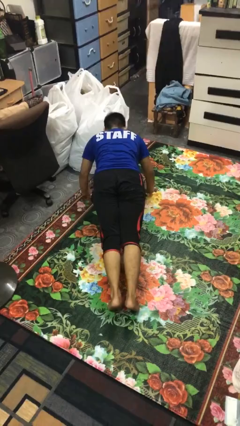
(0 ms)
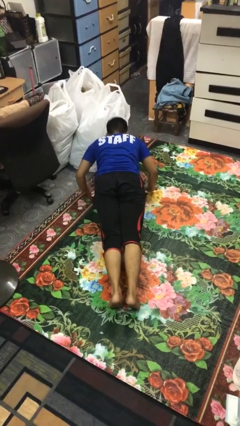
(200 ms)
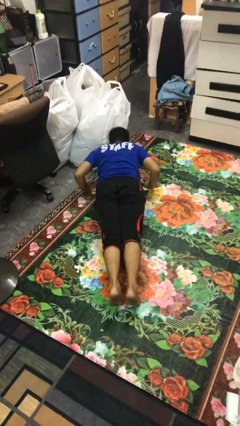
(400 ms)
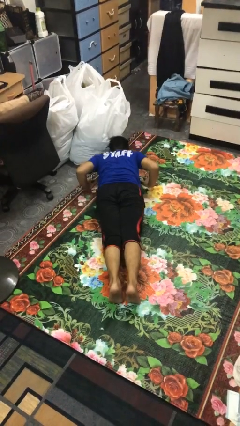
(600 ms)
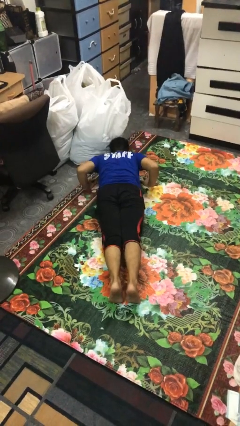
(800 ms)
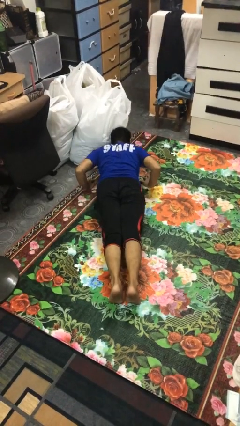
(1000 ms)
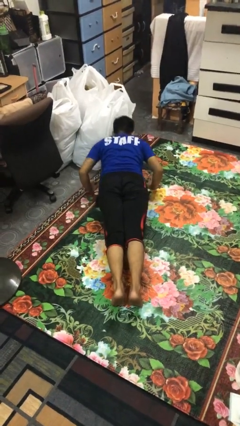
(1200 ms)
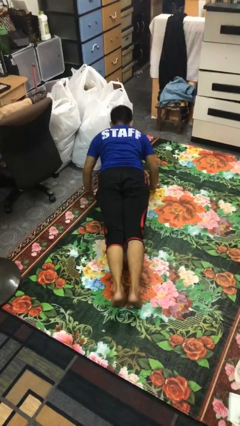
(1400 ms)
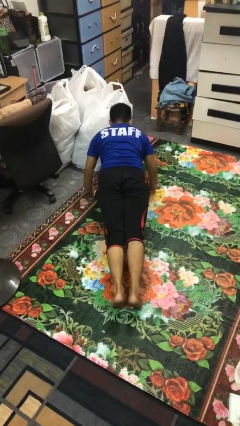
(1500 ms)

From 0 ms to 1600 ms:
person exercises with pushup

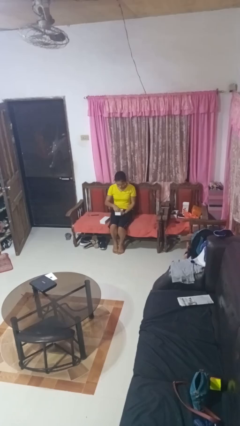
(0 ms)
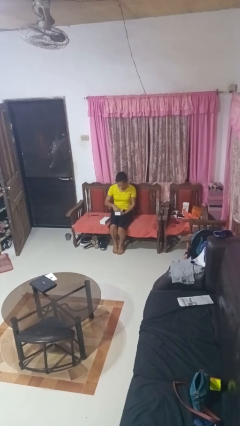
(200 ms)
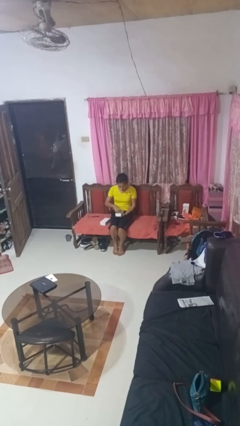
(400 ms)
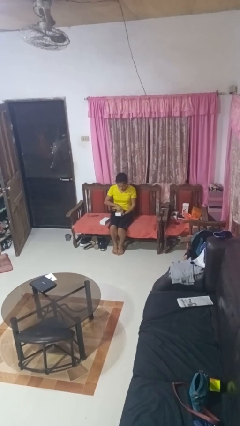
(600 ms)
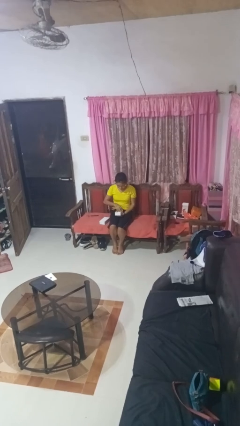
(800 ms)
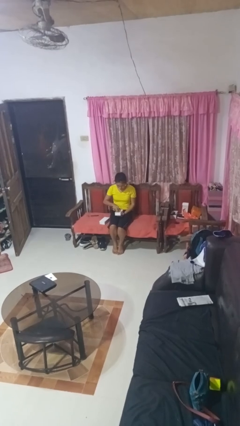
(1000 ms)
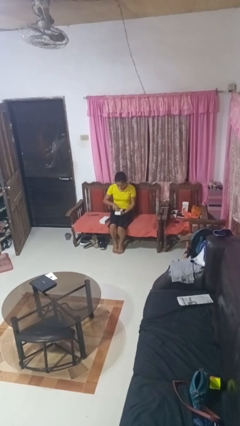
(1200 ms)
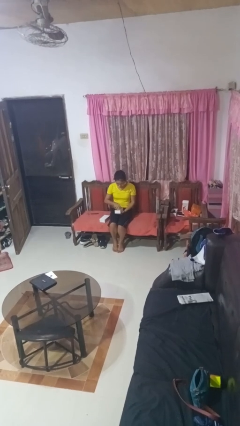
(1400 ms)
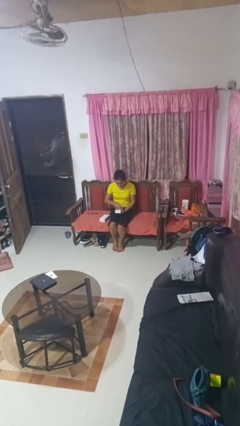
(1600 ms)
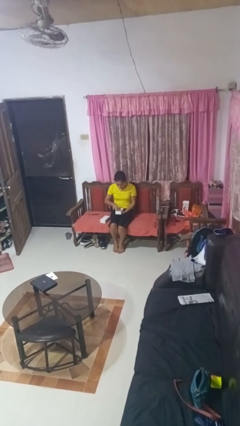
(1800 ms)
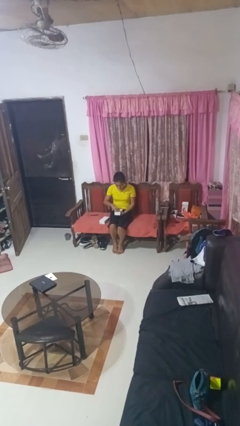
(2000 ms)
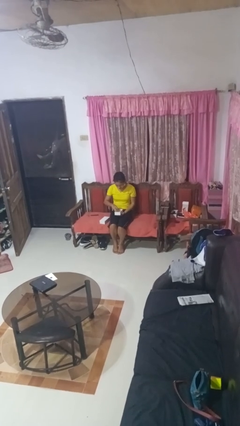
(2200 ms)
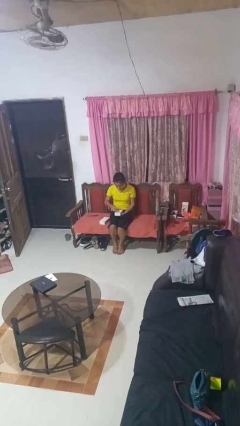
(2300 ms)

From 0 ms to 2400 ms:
person searches jewelry box

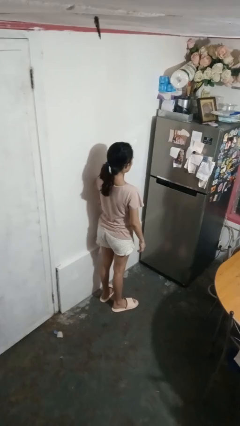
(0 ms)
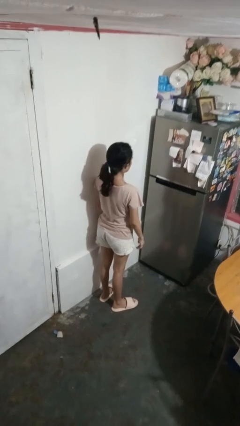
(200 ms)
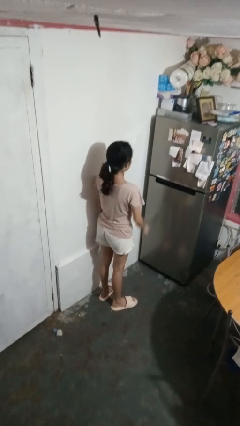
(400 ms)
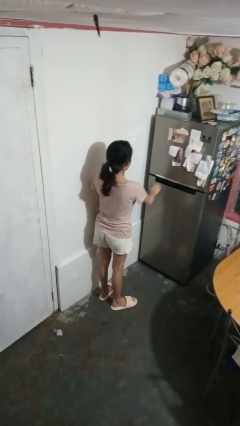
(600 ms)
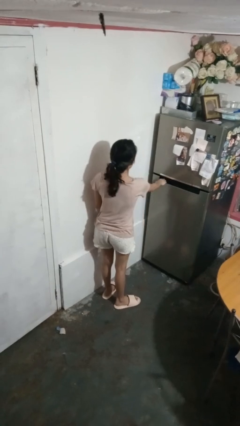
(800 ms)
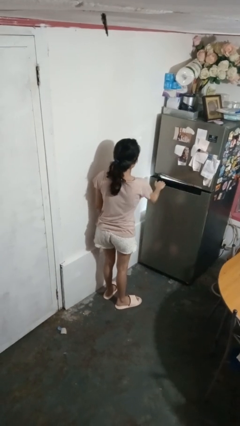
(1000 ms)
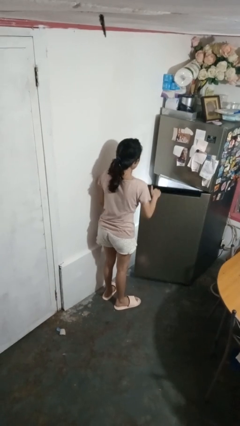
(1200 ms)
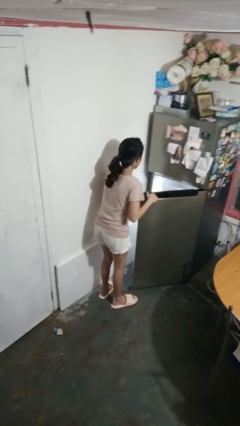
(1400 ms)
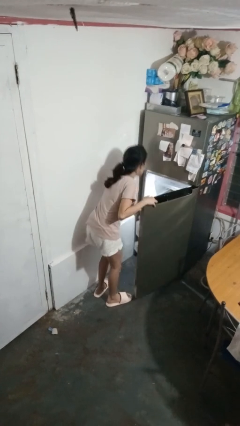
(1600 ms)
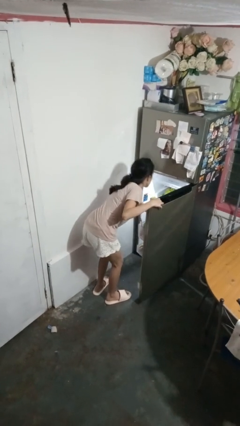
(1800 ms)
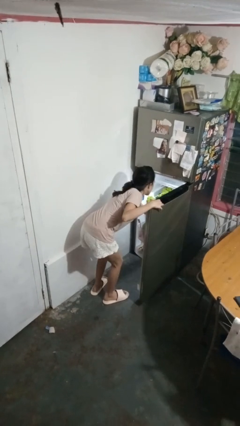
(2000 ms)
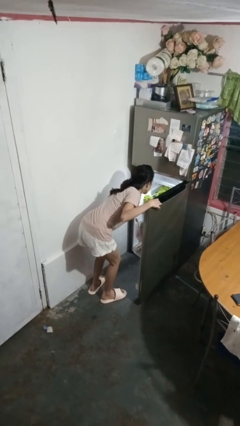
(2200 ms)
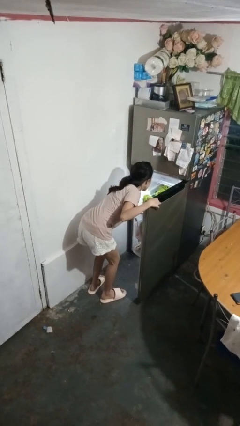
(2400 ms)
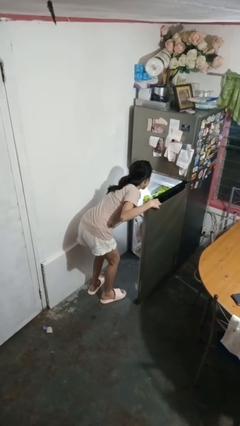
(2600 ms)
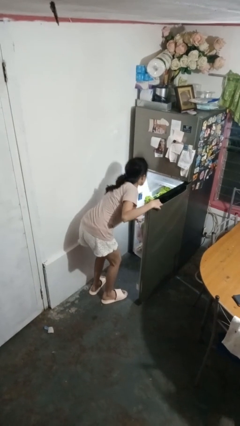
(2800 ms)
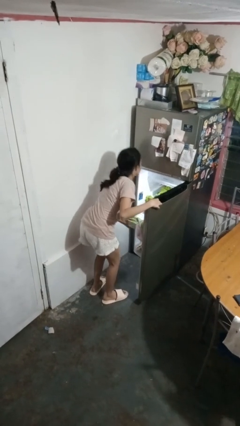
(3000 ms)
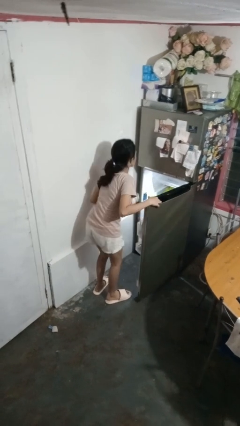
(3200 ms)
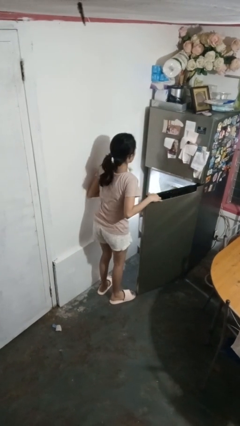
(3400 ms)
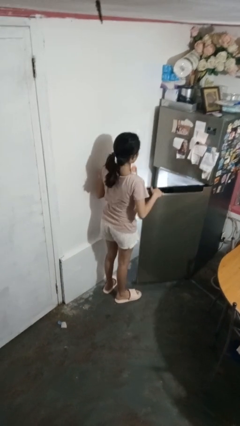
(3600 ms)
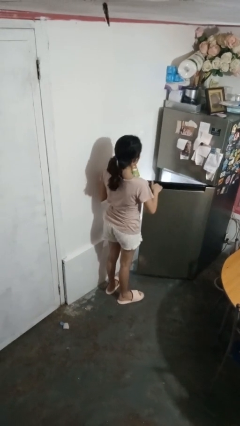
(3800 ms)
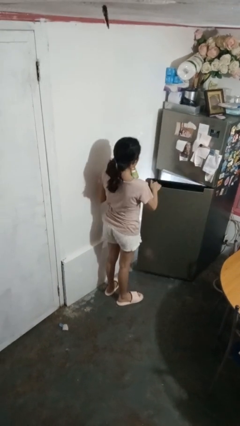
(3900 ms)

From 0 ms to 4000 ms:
person takes object from refrigerator

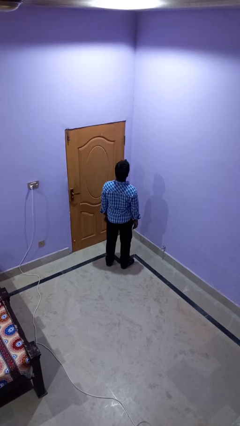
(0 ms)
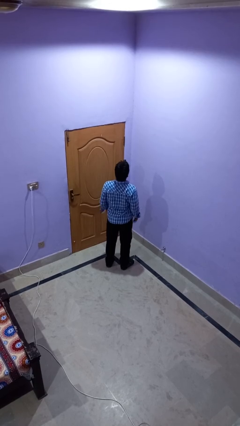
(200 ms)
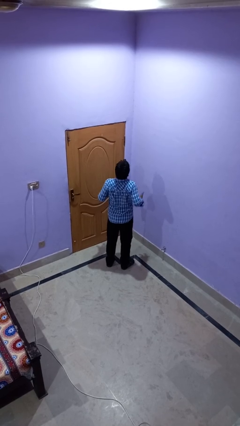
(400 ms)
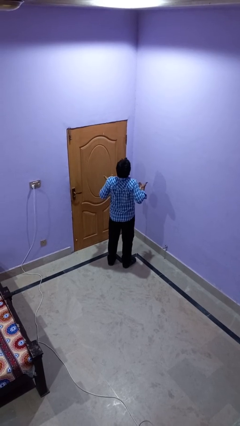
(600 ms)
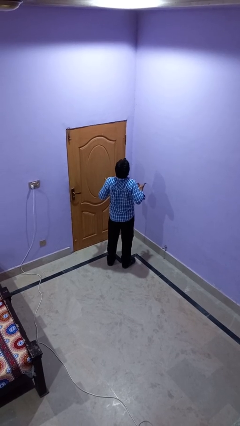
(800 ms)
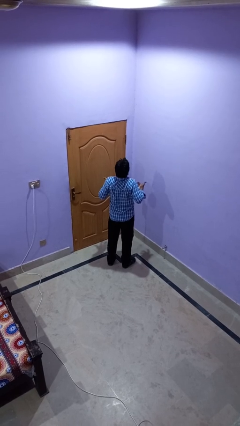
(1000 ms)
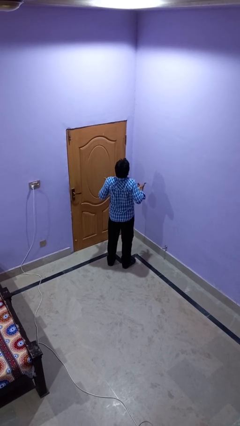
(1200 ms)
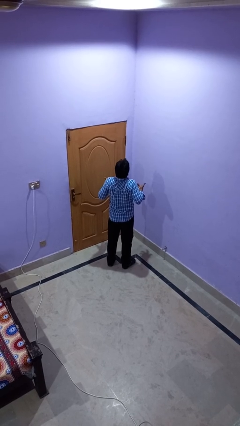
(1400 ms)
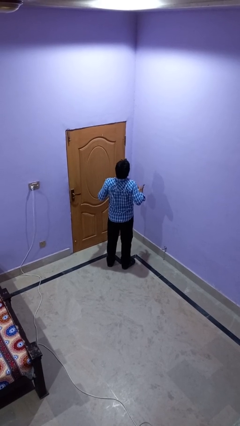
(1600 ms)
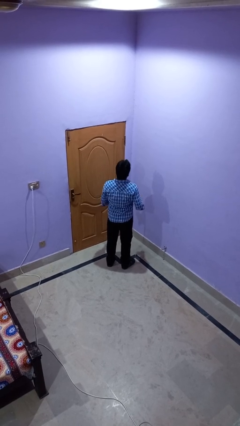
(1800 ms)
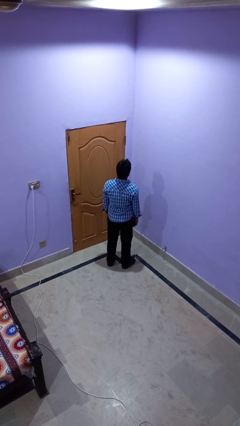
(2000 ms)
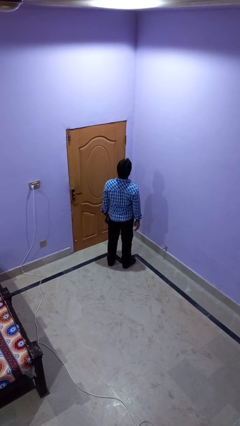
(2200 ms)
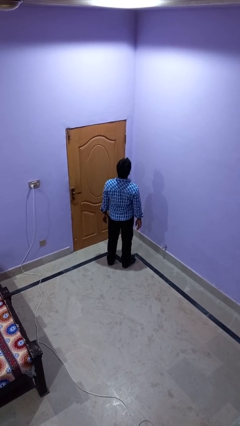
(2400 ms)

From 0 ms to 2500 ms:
person shrugs

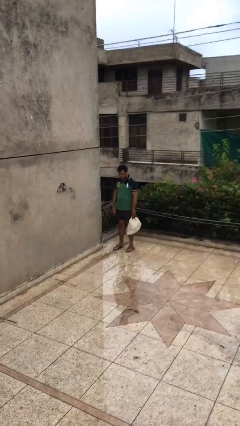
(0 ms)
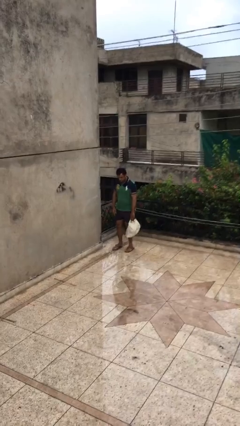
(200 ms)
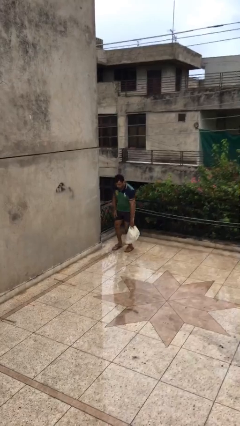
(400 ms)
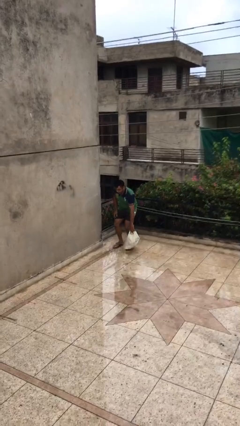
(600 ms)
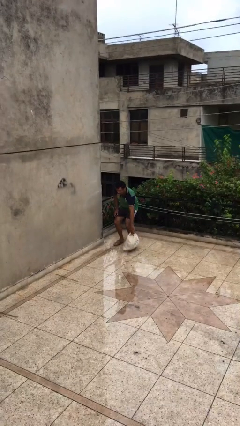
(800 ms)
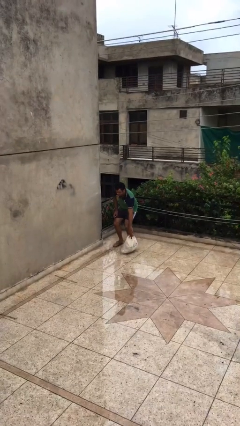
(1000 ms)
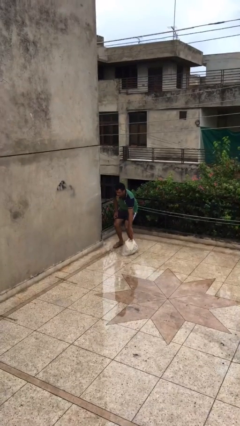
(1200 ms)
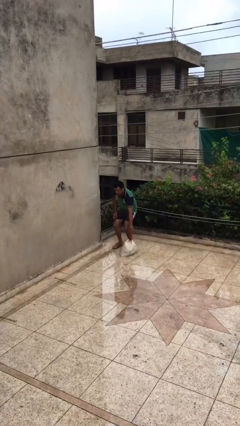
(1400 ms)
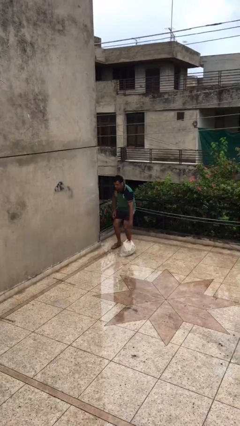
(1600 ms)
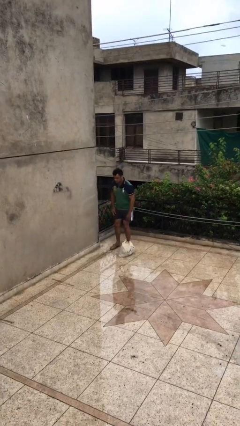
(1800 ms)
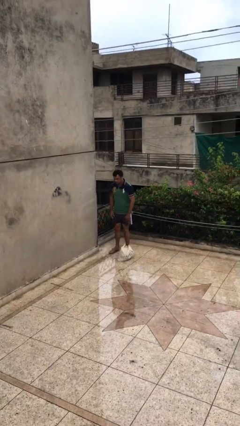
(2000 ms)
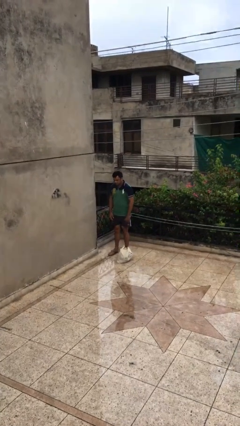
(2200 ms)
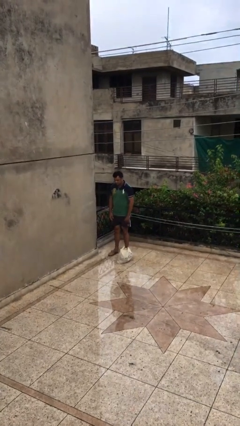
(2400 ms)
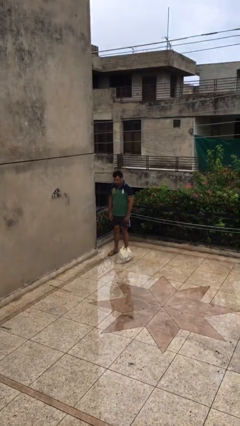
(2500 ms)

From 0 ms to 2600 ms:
person puts down object on floor

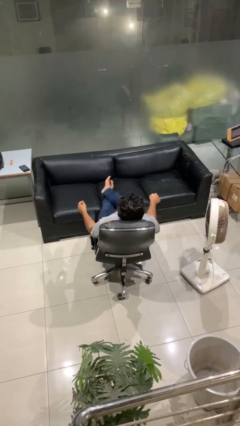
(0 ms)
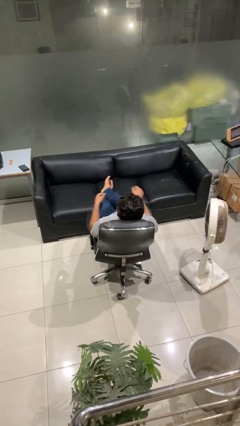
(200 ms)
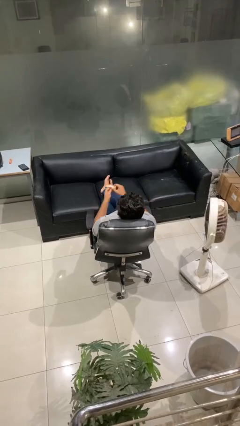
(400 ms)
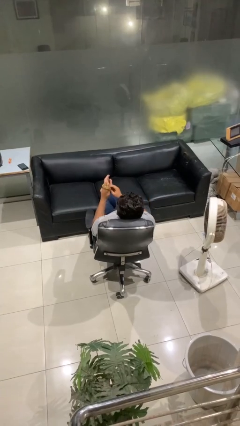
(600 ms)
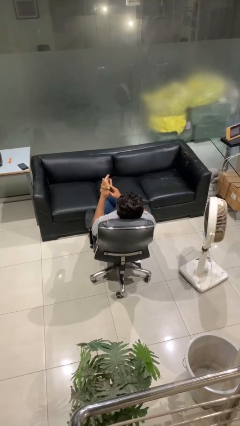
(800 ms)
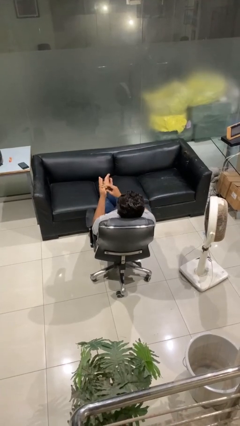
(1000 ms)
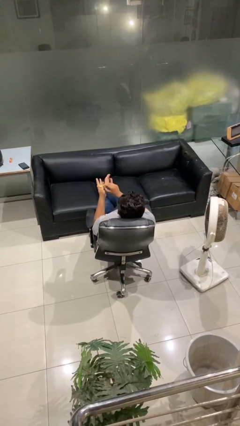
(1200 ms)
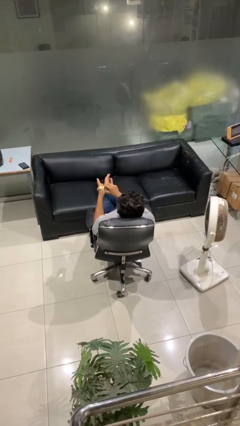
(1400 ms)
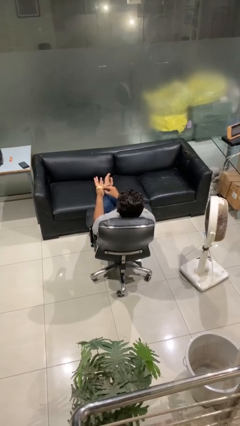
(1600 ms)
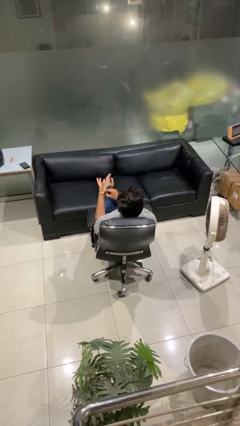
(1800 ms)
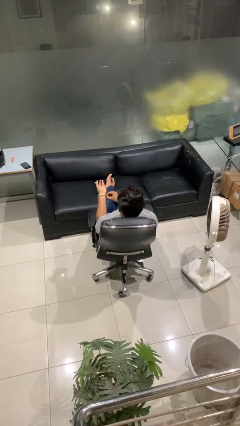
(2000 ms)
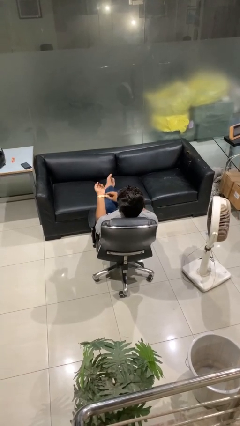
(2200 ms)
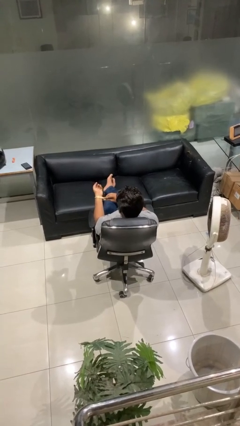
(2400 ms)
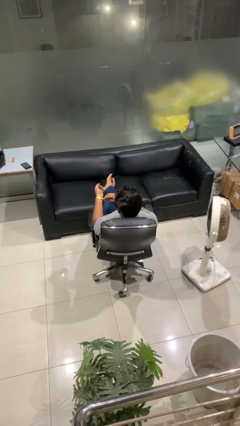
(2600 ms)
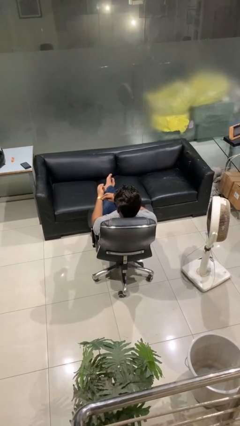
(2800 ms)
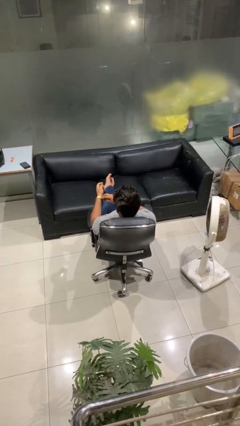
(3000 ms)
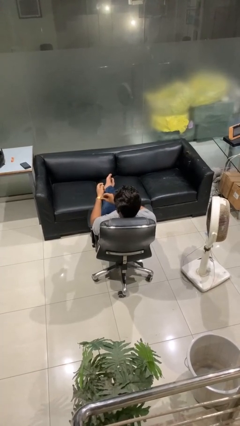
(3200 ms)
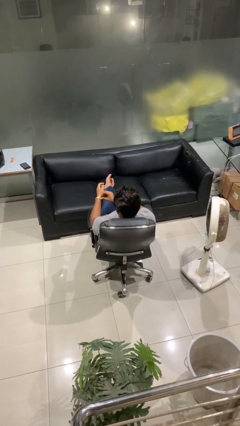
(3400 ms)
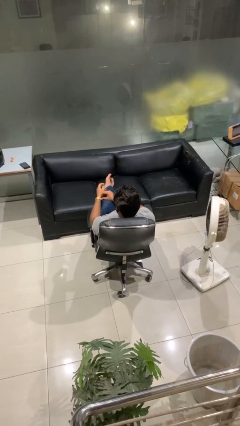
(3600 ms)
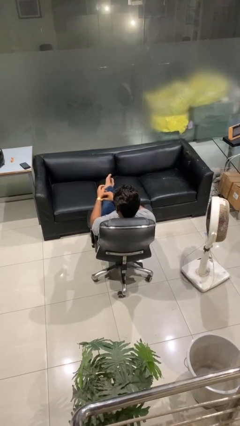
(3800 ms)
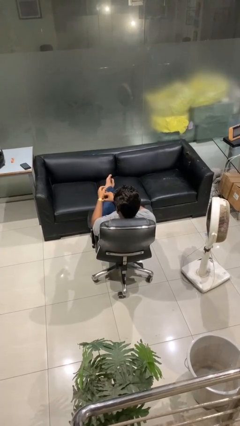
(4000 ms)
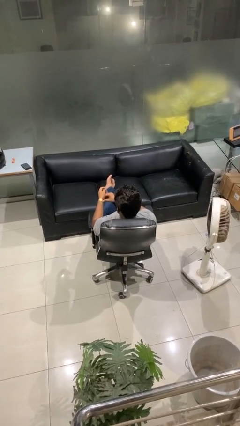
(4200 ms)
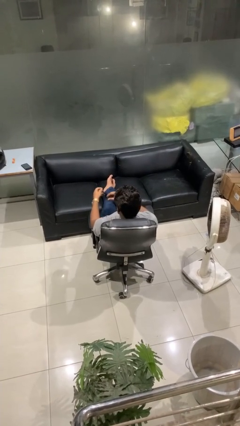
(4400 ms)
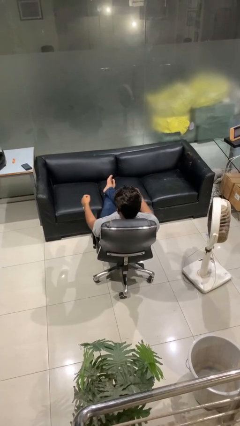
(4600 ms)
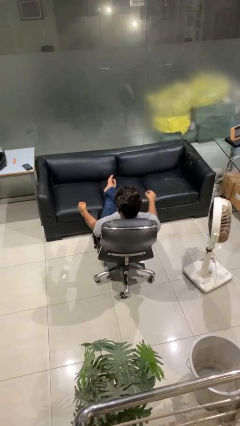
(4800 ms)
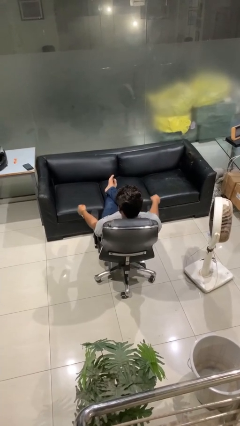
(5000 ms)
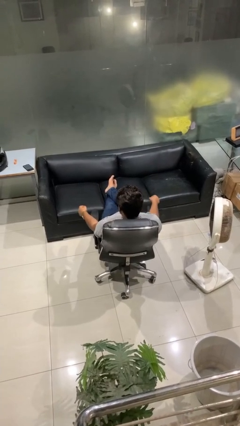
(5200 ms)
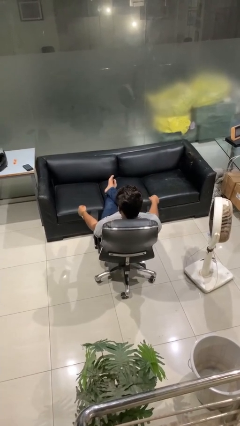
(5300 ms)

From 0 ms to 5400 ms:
person puts on wristwatch
